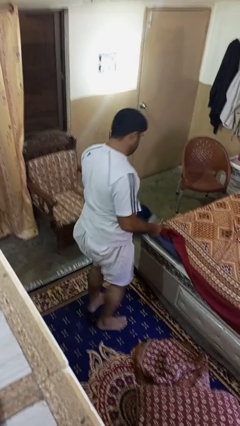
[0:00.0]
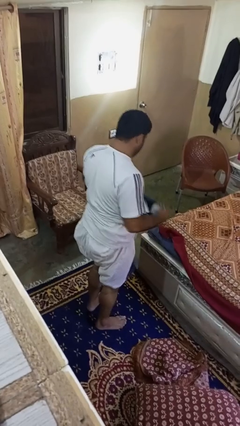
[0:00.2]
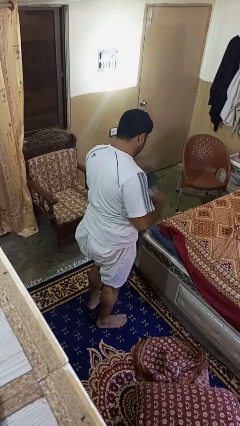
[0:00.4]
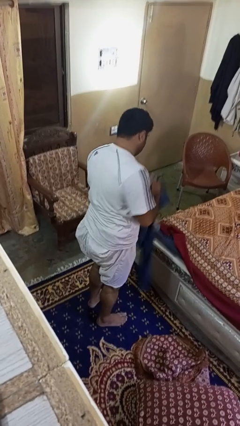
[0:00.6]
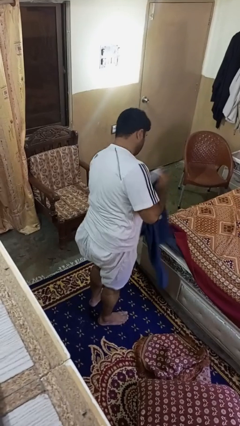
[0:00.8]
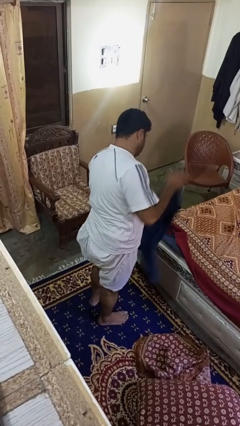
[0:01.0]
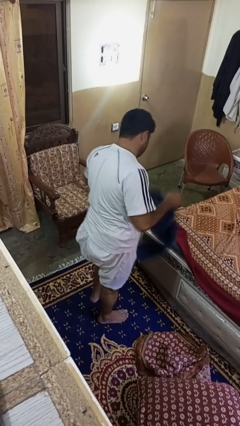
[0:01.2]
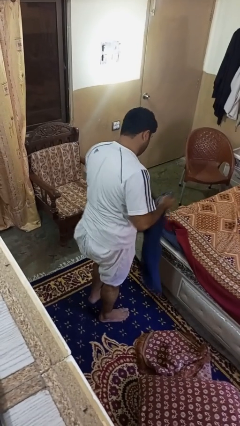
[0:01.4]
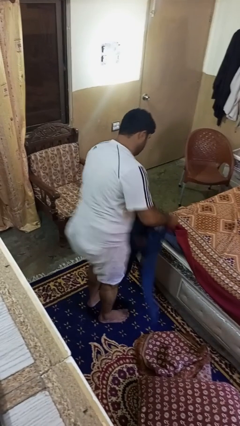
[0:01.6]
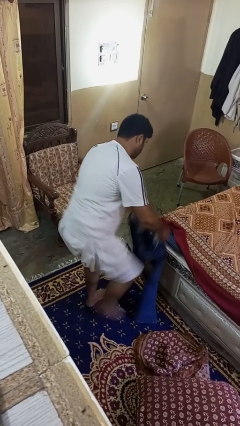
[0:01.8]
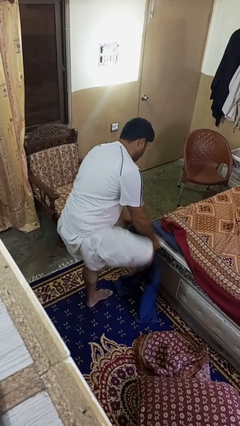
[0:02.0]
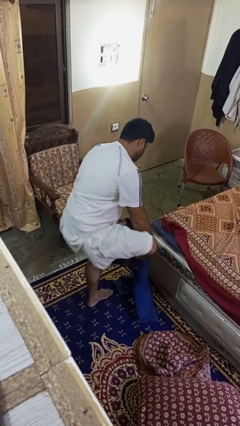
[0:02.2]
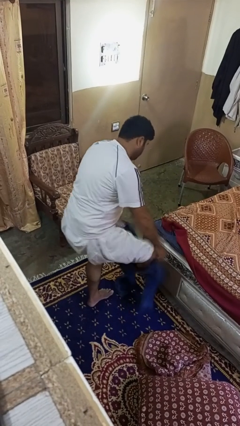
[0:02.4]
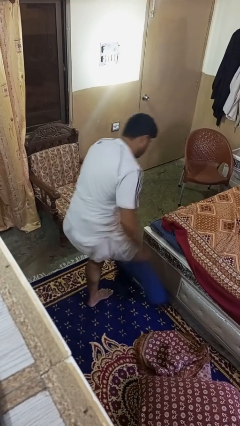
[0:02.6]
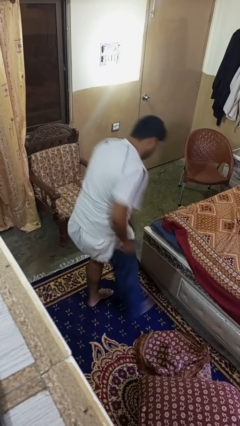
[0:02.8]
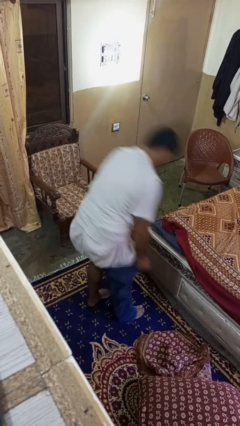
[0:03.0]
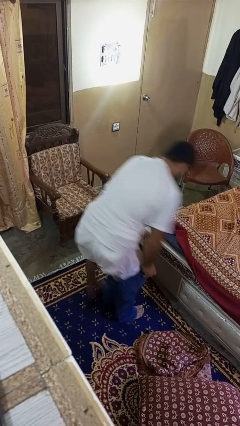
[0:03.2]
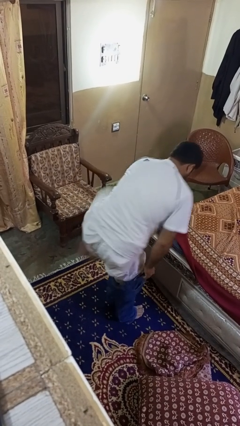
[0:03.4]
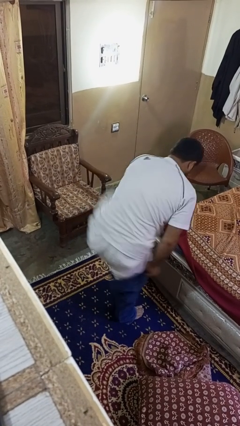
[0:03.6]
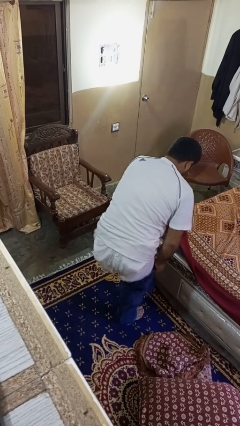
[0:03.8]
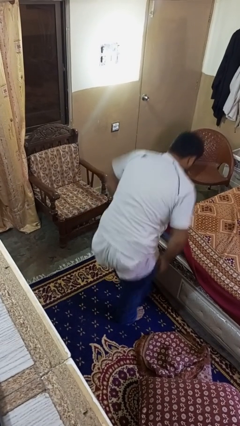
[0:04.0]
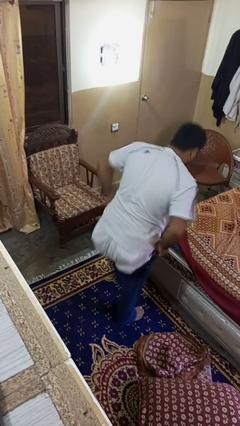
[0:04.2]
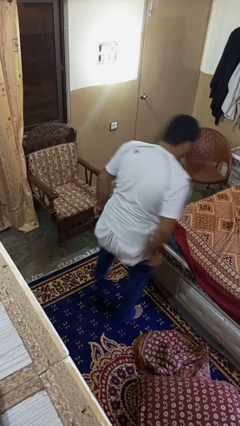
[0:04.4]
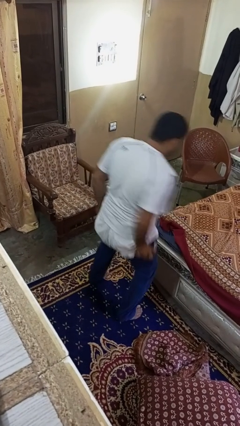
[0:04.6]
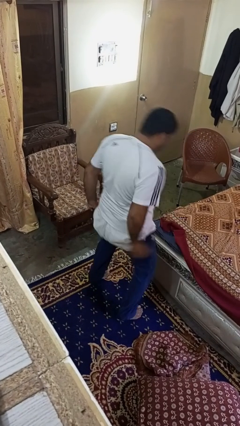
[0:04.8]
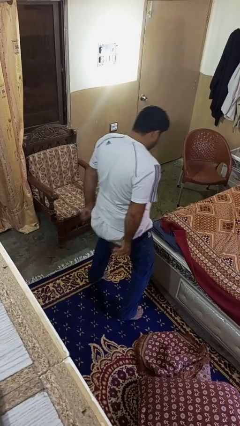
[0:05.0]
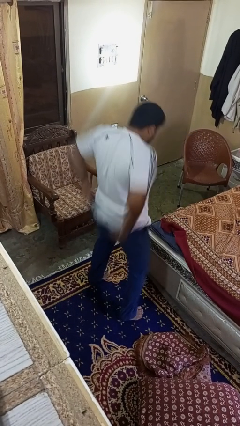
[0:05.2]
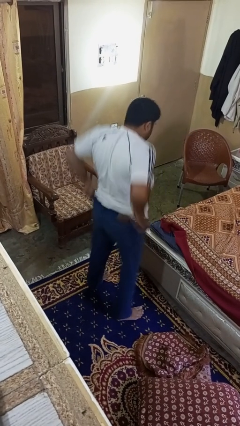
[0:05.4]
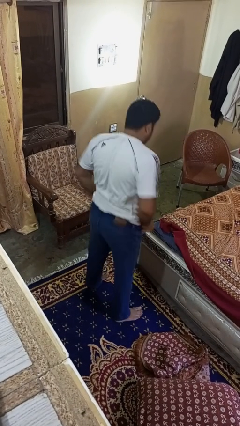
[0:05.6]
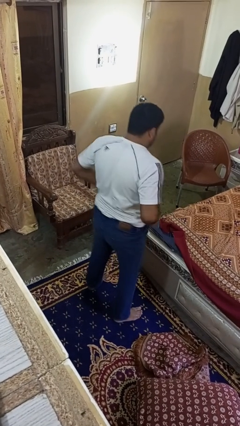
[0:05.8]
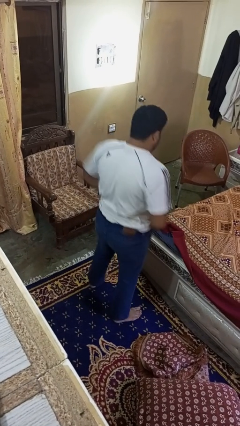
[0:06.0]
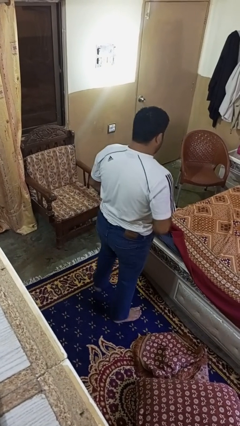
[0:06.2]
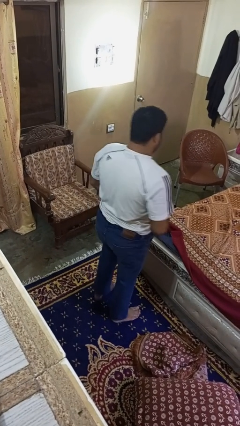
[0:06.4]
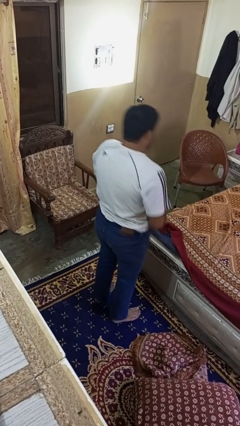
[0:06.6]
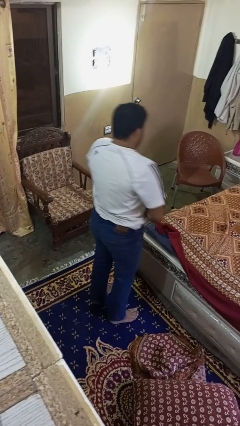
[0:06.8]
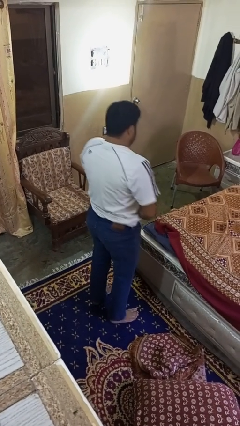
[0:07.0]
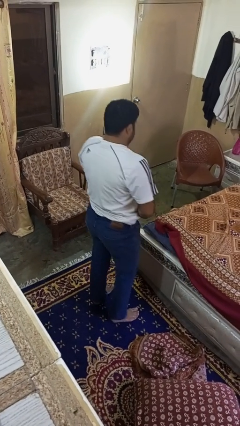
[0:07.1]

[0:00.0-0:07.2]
person puts on pants

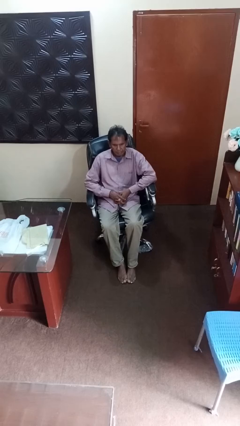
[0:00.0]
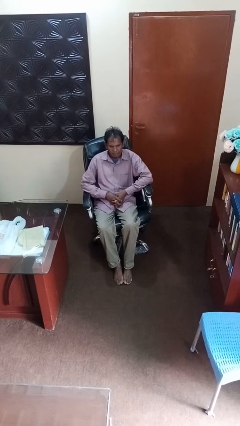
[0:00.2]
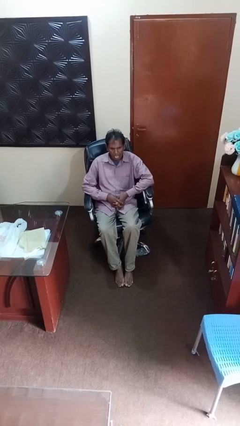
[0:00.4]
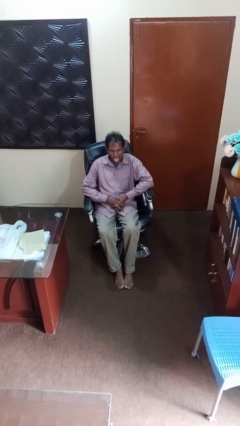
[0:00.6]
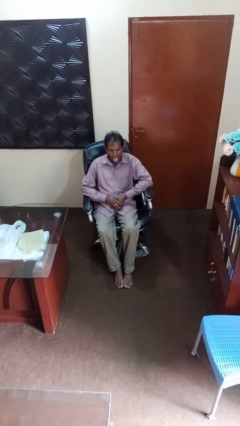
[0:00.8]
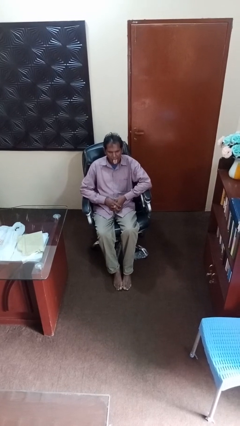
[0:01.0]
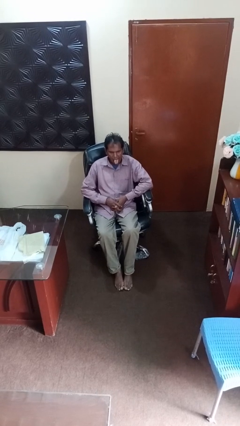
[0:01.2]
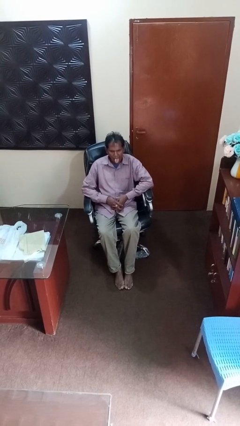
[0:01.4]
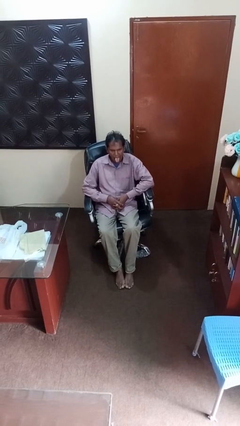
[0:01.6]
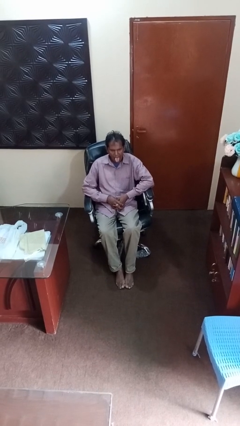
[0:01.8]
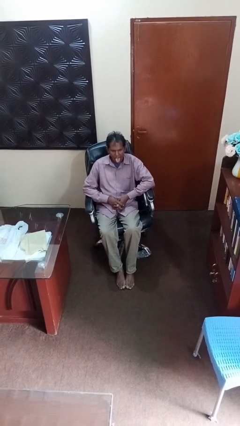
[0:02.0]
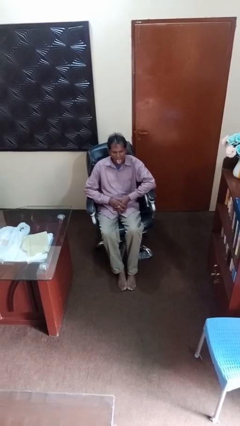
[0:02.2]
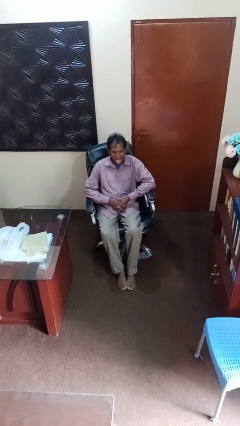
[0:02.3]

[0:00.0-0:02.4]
person sticks out tongue

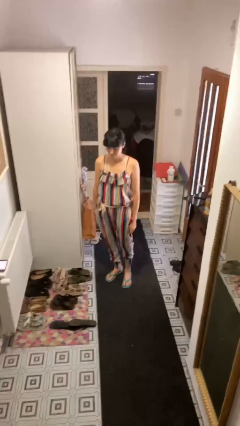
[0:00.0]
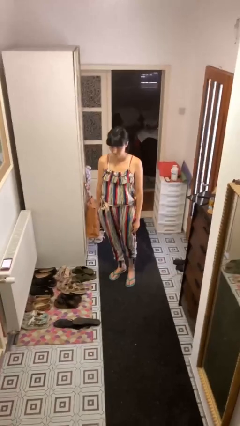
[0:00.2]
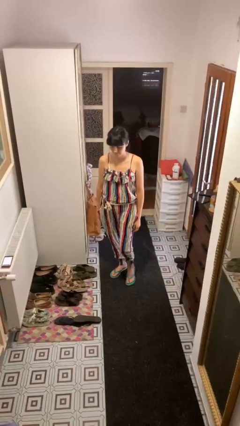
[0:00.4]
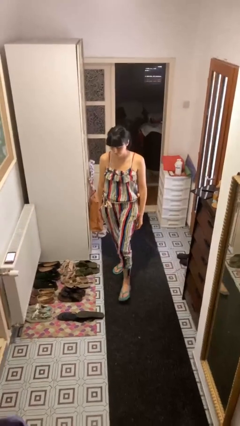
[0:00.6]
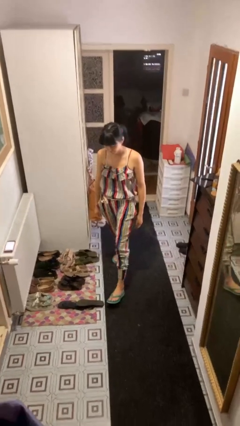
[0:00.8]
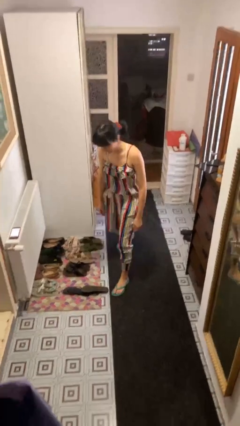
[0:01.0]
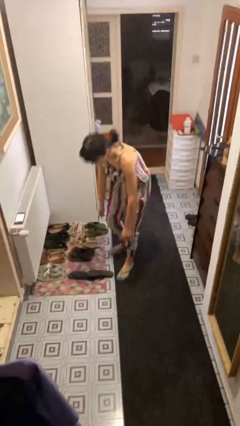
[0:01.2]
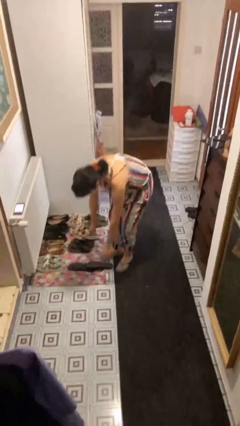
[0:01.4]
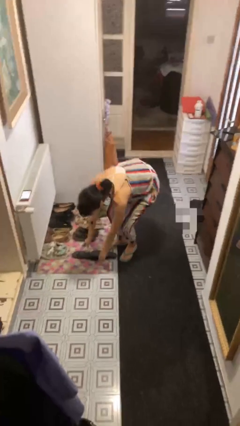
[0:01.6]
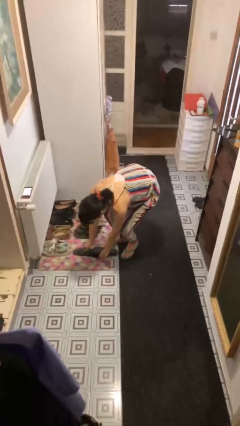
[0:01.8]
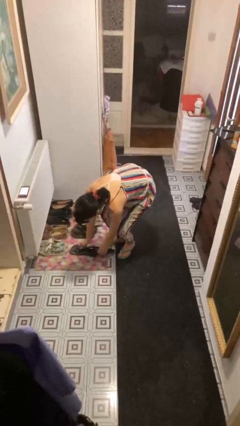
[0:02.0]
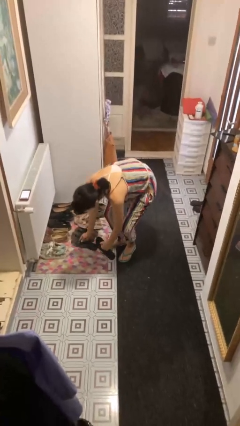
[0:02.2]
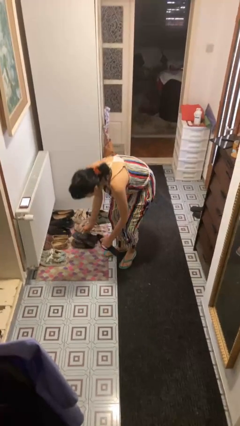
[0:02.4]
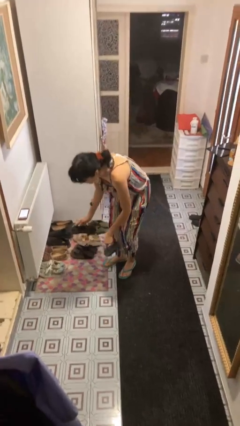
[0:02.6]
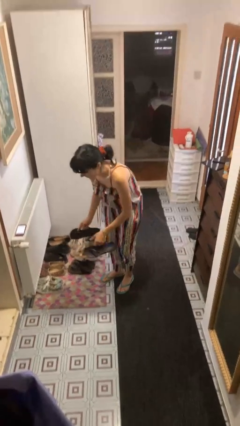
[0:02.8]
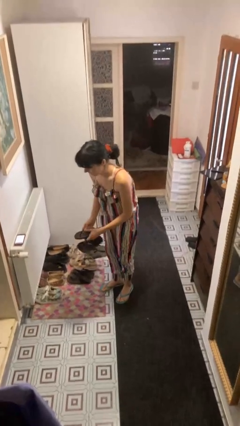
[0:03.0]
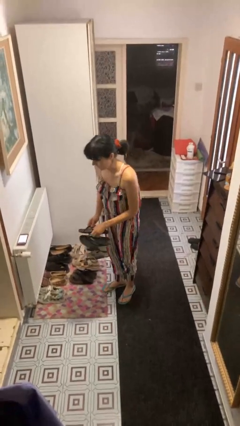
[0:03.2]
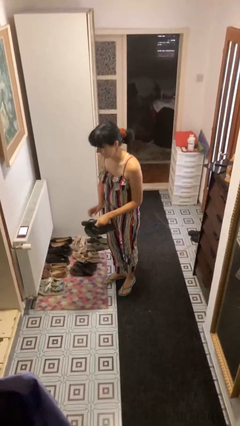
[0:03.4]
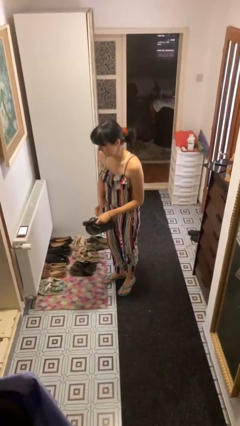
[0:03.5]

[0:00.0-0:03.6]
person picks up object from floor

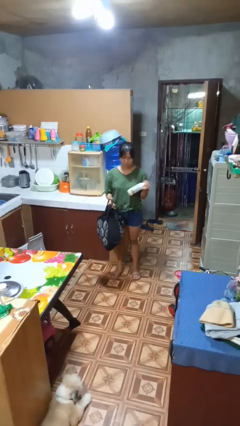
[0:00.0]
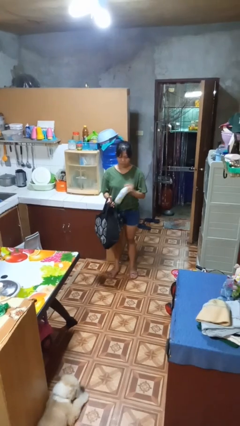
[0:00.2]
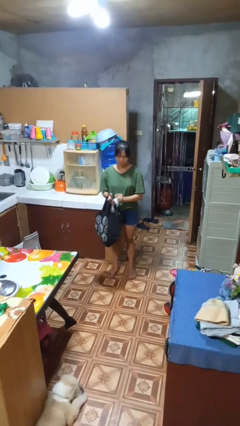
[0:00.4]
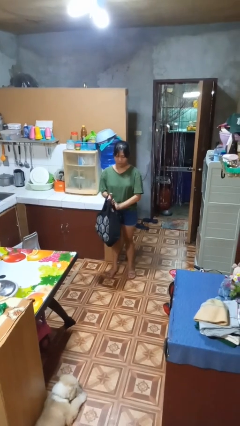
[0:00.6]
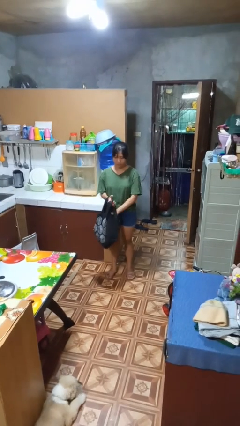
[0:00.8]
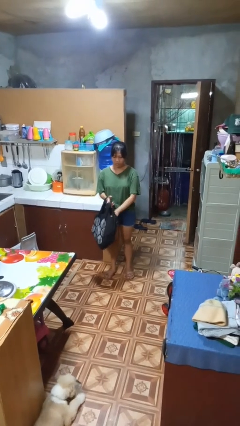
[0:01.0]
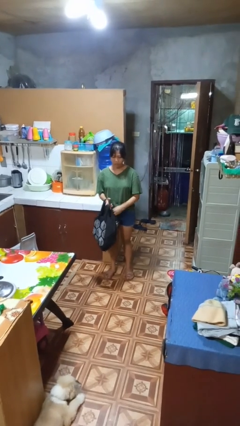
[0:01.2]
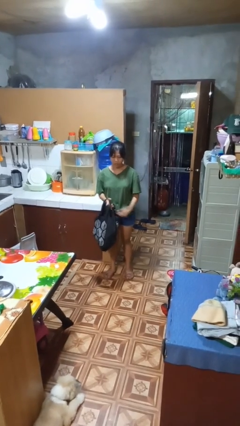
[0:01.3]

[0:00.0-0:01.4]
person puts object into bag

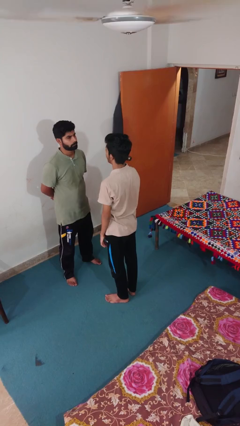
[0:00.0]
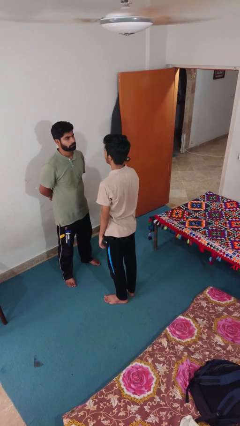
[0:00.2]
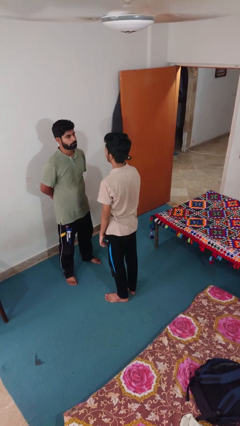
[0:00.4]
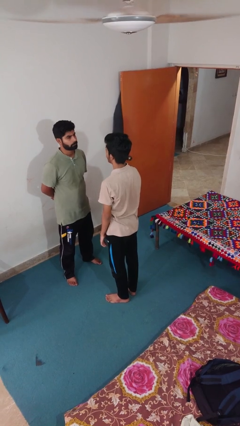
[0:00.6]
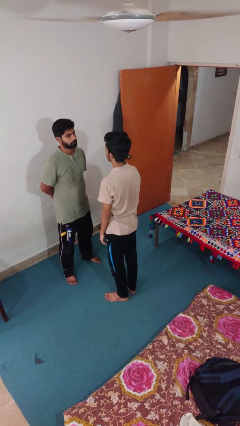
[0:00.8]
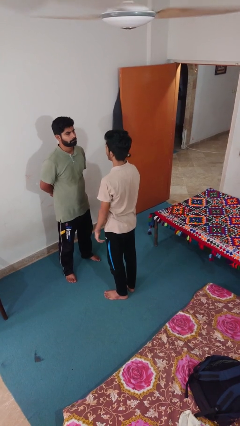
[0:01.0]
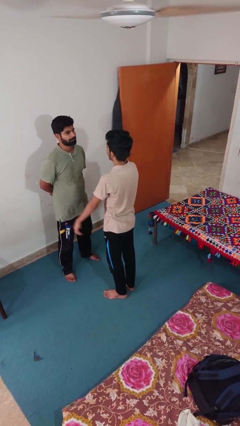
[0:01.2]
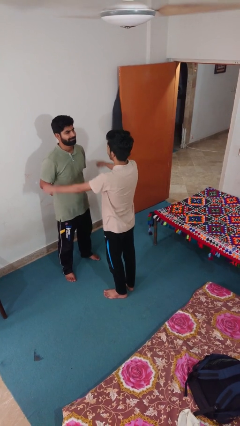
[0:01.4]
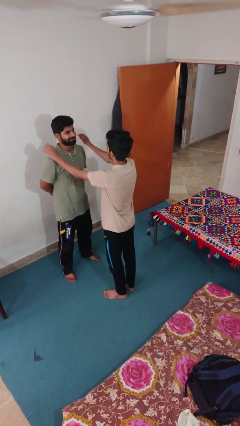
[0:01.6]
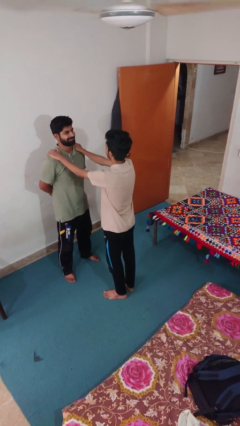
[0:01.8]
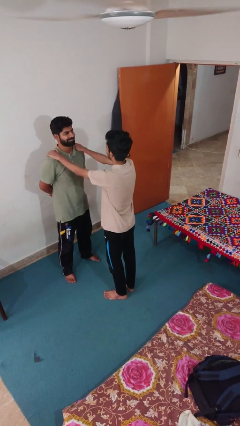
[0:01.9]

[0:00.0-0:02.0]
person pounds shoulders of person

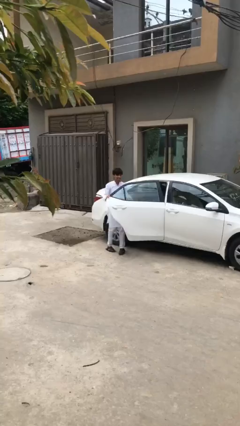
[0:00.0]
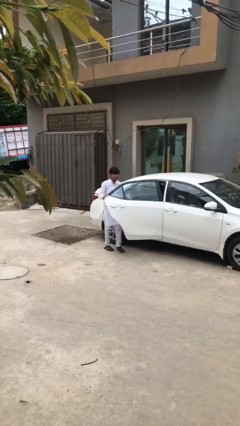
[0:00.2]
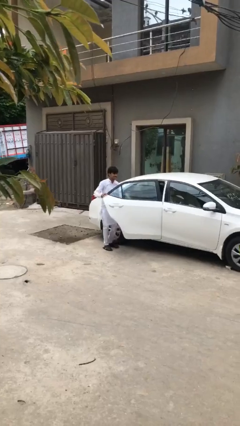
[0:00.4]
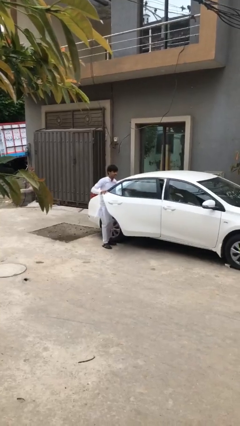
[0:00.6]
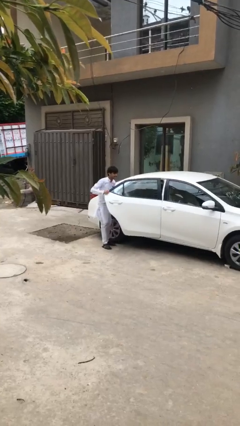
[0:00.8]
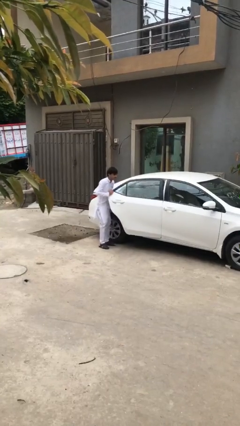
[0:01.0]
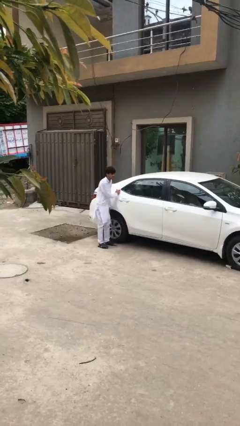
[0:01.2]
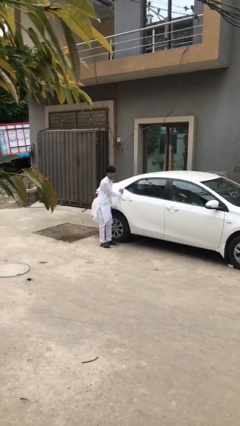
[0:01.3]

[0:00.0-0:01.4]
person closes car door

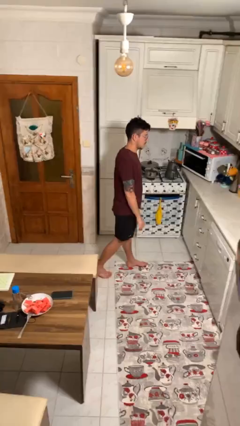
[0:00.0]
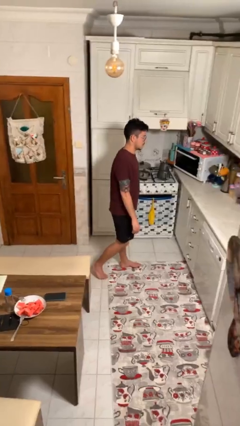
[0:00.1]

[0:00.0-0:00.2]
person opens facility door
